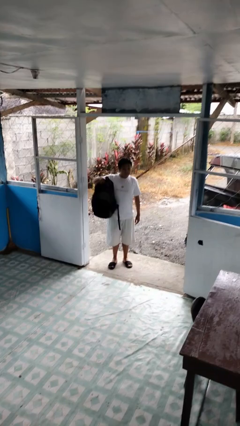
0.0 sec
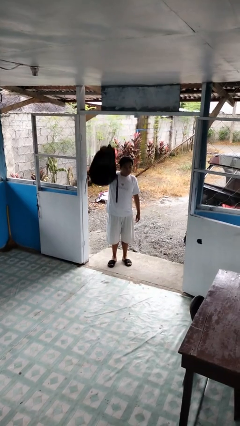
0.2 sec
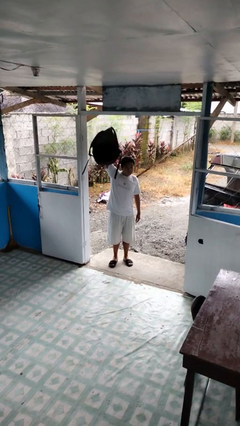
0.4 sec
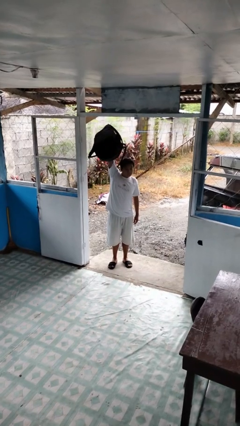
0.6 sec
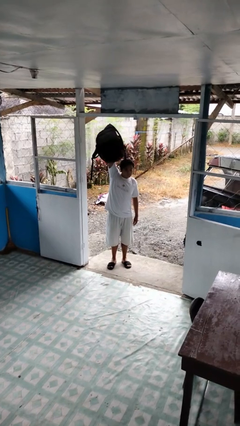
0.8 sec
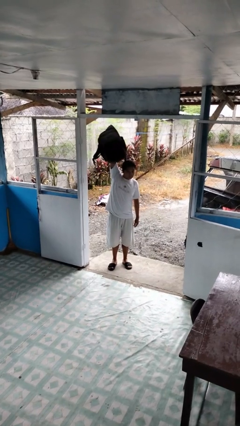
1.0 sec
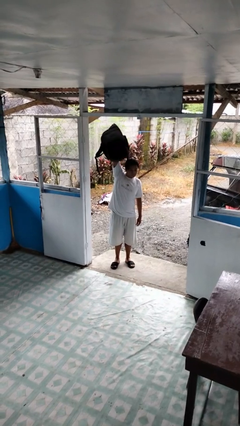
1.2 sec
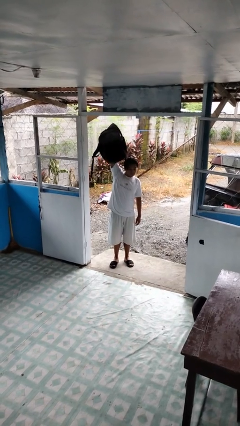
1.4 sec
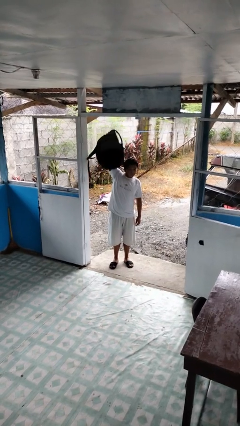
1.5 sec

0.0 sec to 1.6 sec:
person holds object above head

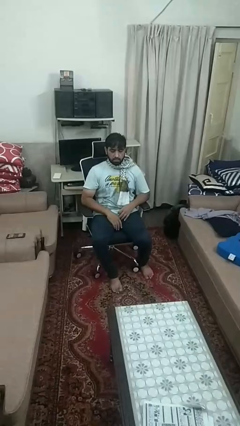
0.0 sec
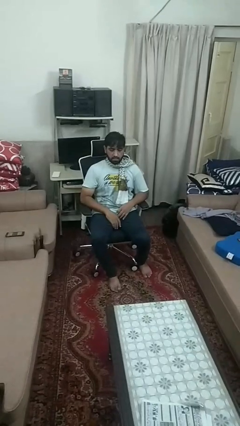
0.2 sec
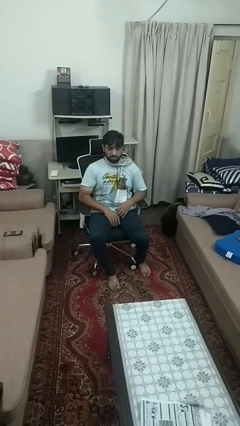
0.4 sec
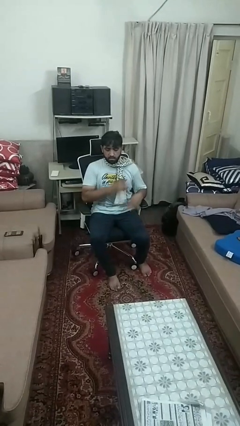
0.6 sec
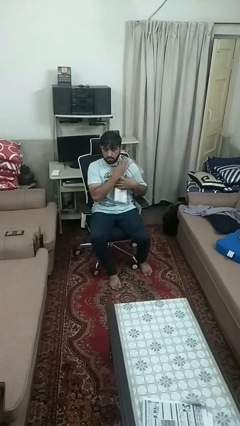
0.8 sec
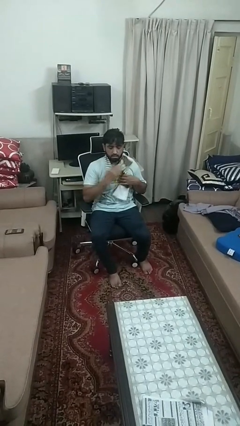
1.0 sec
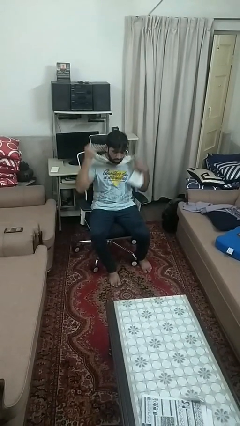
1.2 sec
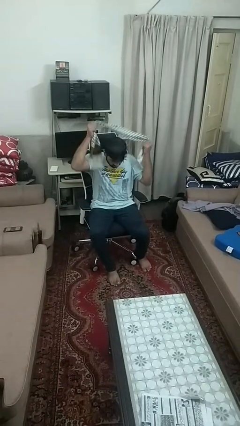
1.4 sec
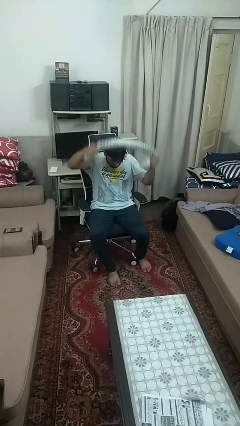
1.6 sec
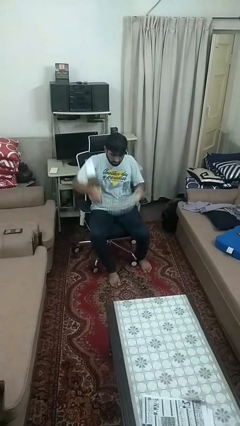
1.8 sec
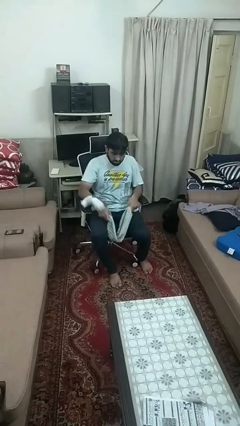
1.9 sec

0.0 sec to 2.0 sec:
person takes off scarf

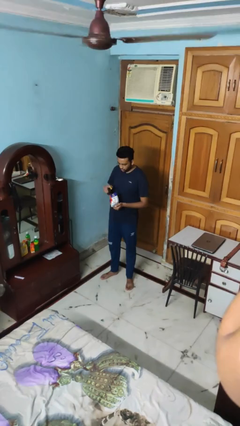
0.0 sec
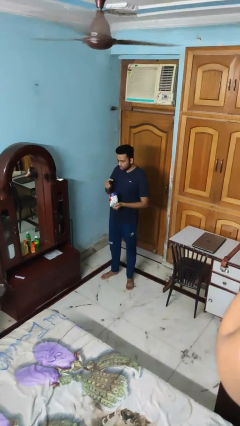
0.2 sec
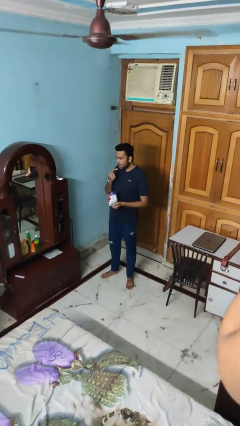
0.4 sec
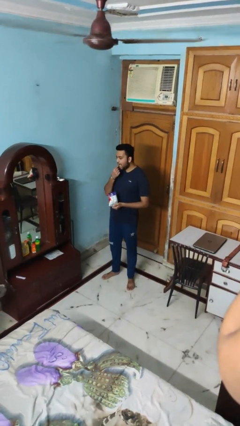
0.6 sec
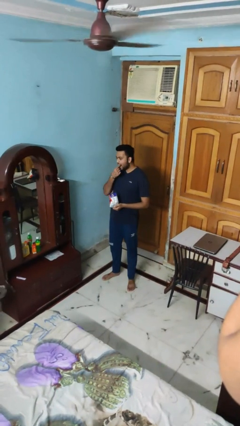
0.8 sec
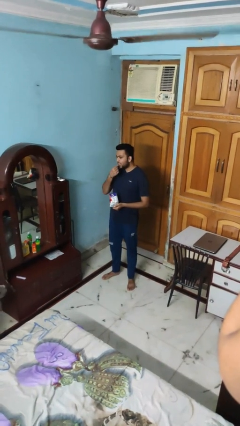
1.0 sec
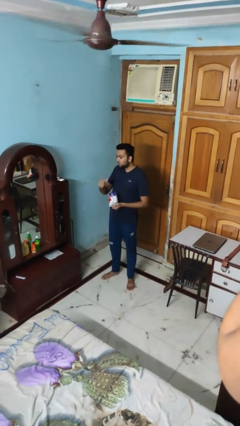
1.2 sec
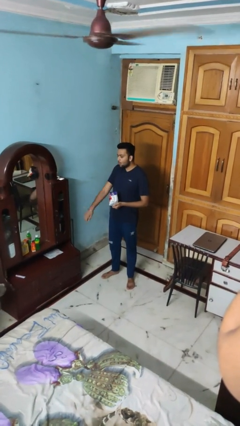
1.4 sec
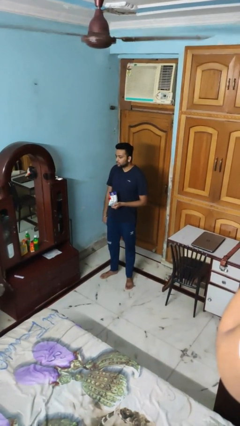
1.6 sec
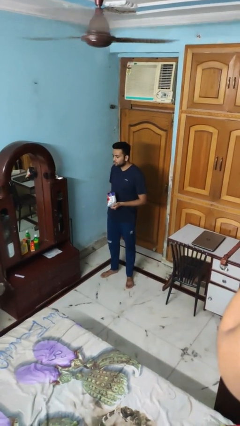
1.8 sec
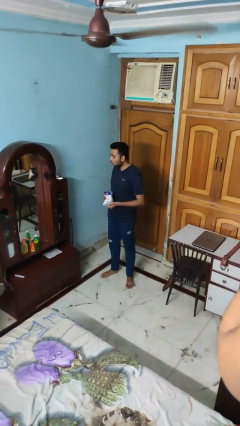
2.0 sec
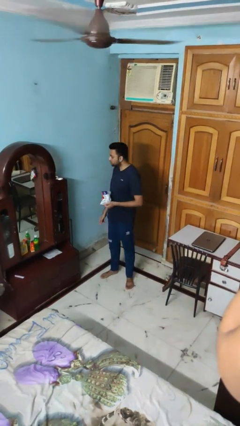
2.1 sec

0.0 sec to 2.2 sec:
person eats snack from bag

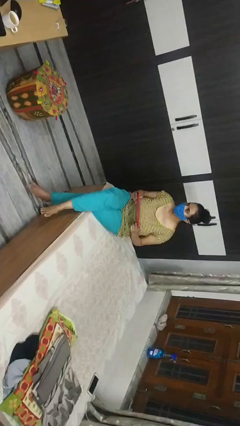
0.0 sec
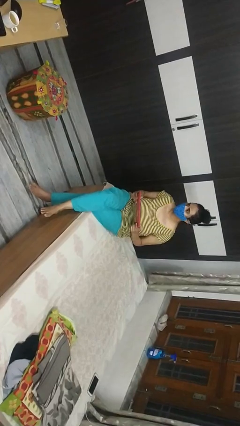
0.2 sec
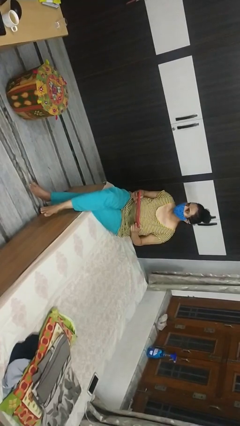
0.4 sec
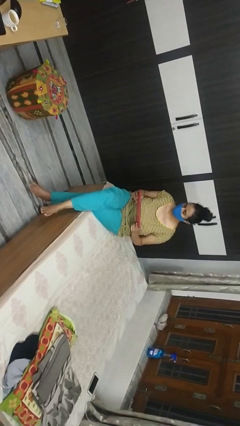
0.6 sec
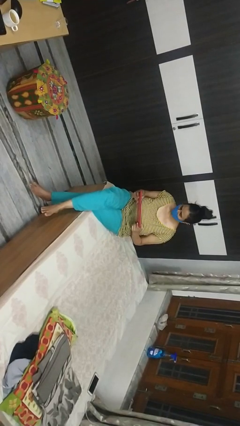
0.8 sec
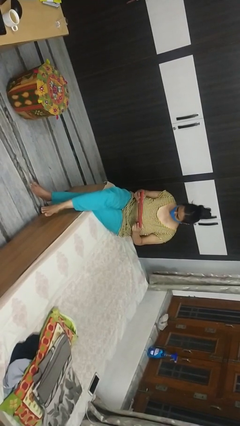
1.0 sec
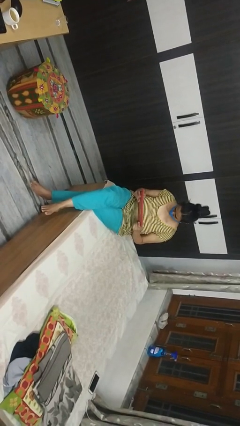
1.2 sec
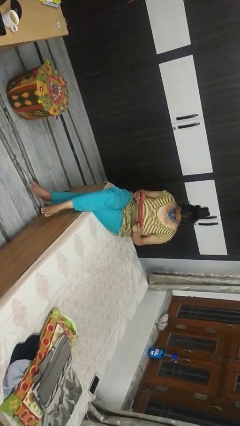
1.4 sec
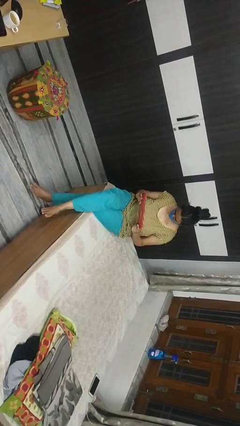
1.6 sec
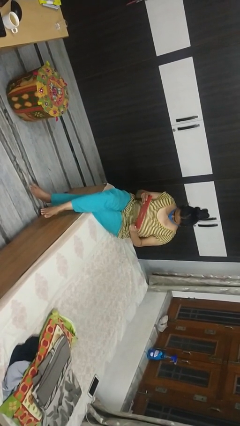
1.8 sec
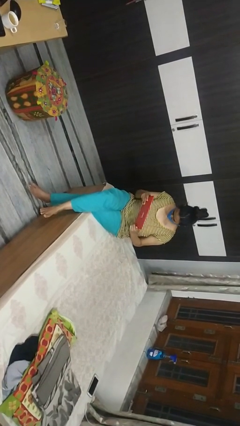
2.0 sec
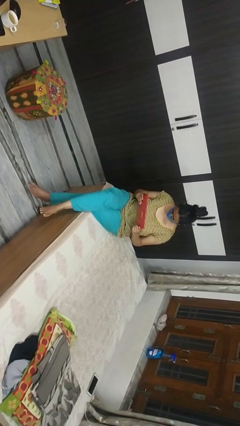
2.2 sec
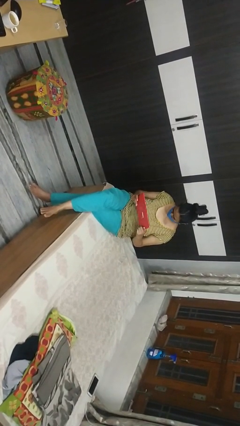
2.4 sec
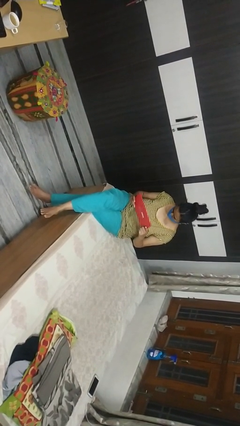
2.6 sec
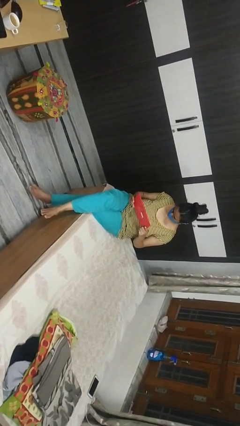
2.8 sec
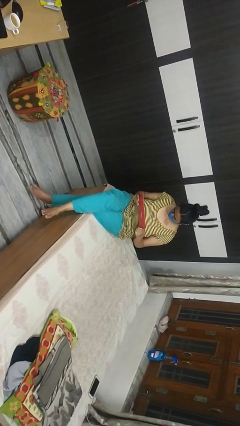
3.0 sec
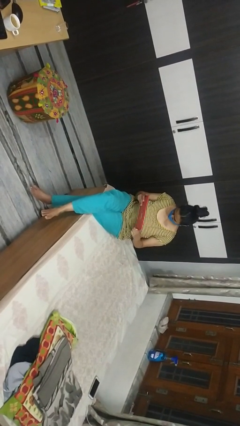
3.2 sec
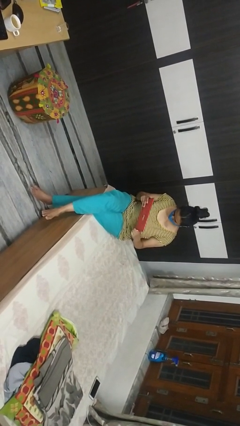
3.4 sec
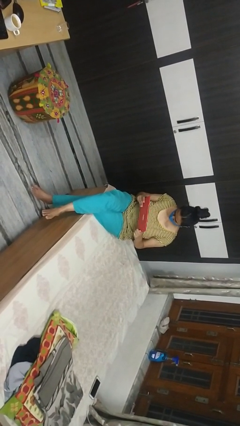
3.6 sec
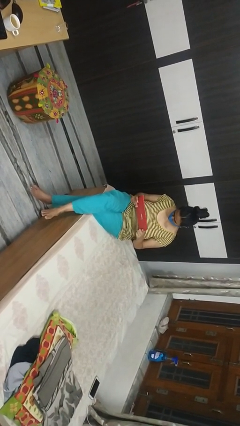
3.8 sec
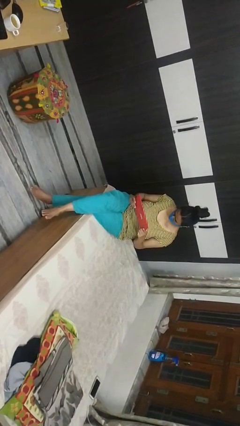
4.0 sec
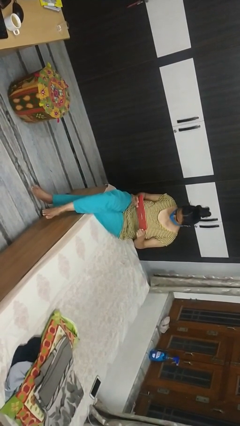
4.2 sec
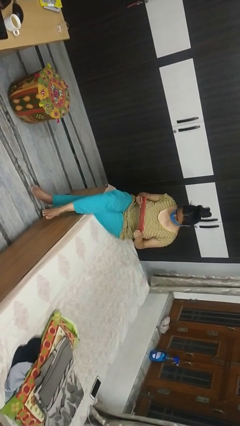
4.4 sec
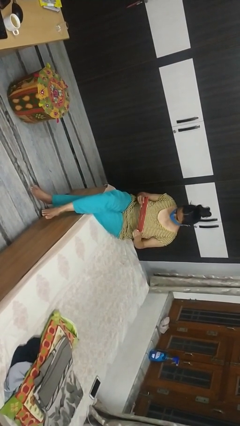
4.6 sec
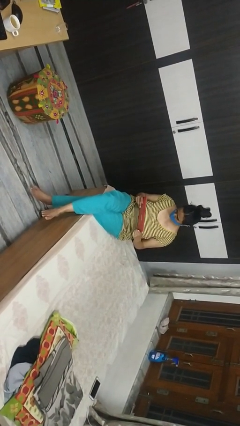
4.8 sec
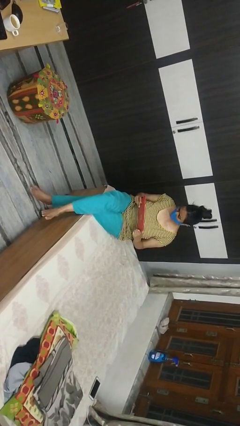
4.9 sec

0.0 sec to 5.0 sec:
person interacts with handheld game

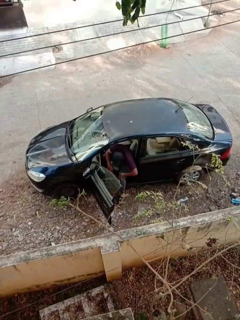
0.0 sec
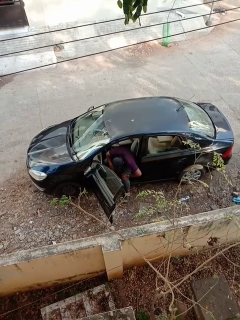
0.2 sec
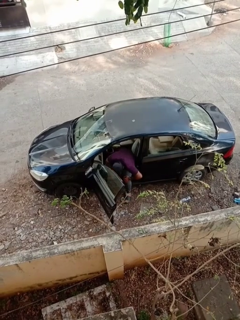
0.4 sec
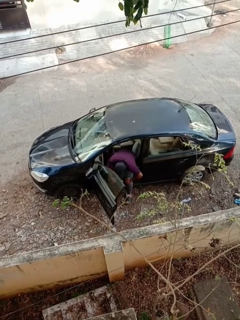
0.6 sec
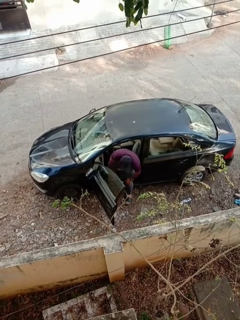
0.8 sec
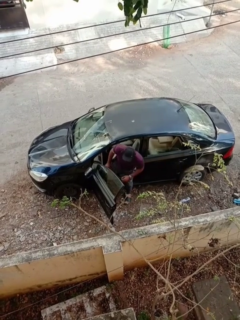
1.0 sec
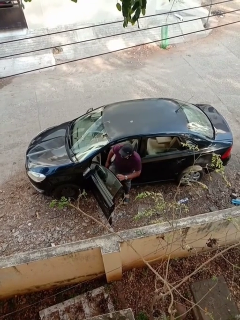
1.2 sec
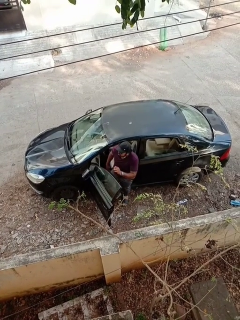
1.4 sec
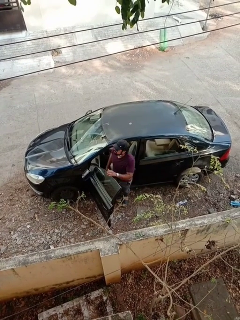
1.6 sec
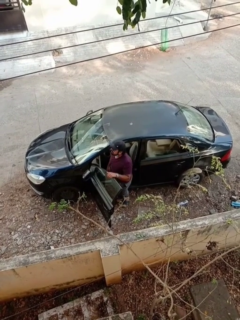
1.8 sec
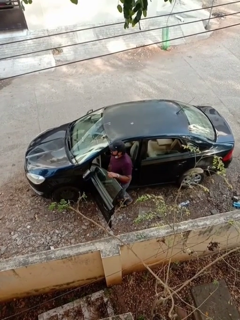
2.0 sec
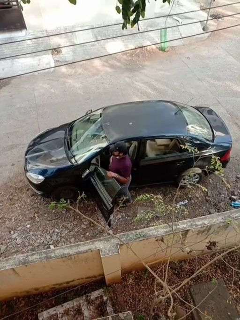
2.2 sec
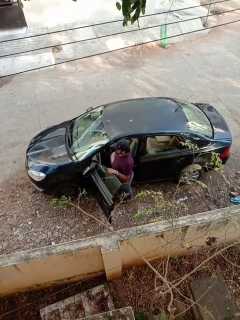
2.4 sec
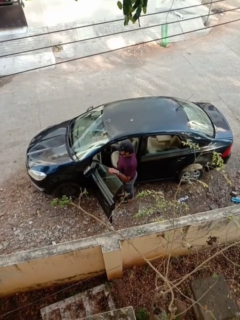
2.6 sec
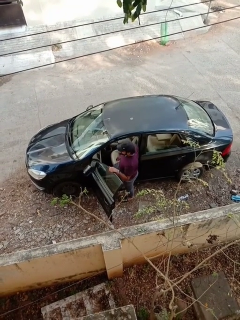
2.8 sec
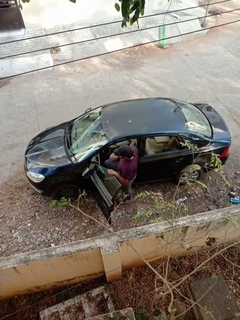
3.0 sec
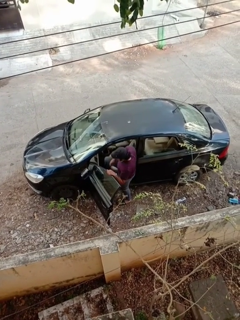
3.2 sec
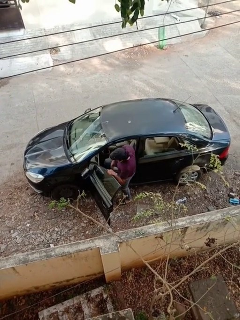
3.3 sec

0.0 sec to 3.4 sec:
person exits car

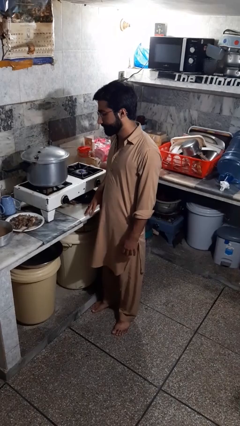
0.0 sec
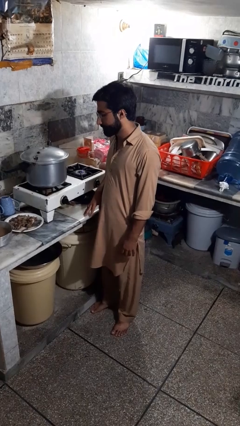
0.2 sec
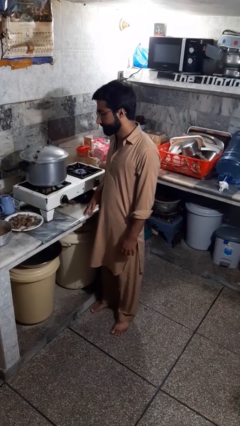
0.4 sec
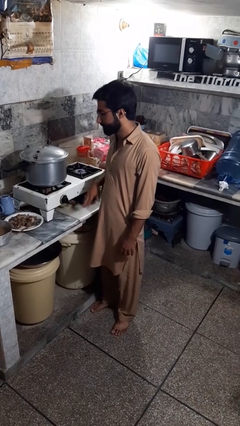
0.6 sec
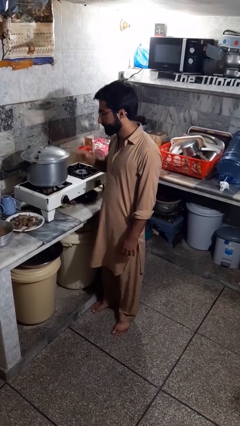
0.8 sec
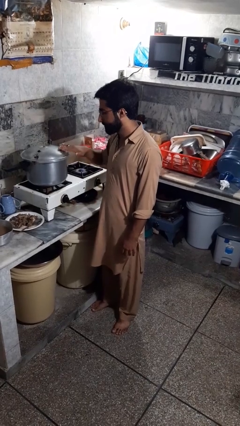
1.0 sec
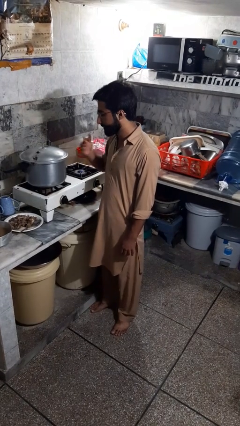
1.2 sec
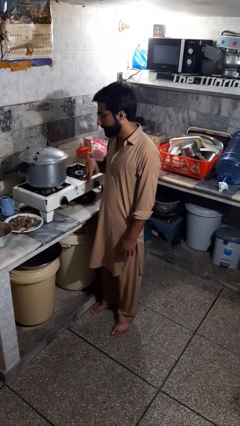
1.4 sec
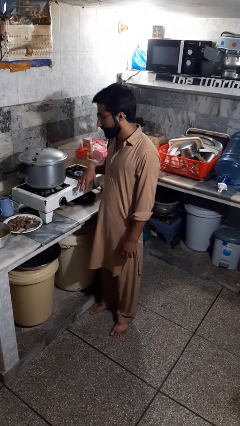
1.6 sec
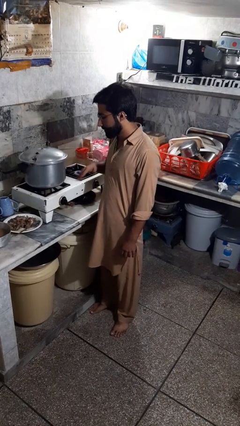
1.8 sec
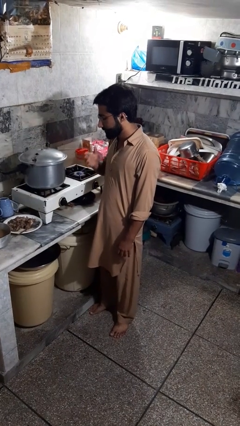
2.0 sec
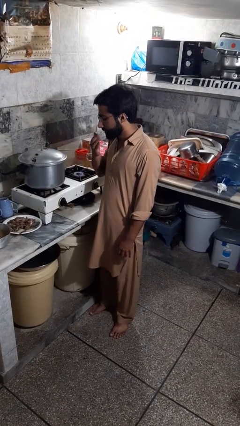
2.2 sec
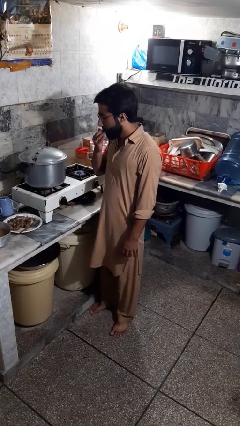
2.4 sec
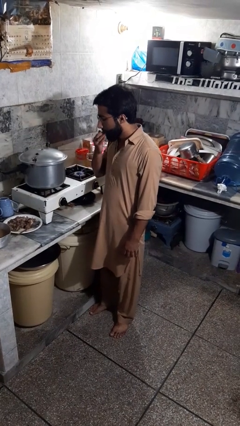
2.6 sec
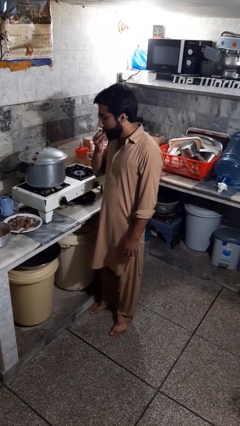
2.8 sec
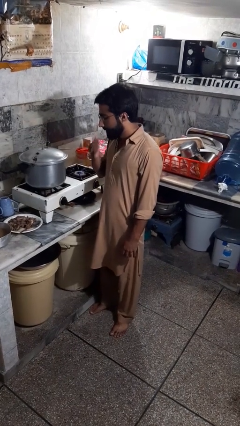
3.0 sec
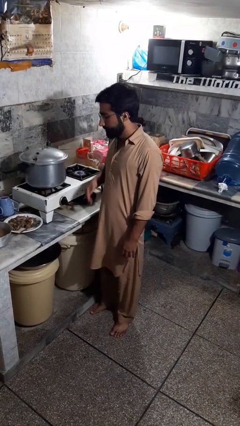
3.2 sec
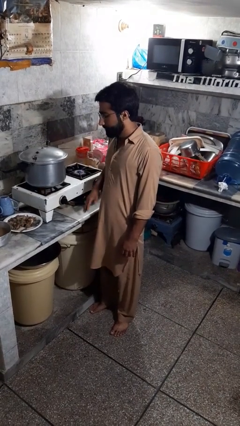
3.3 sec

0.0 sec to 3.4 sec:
person burns hand

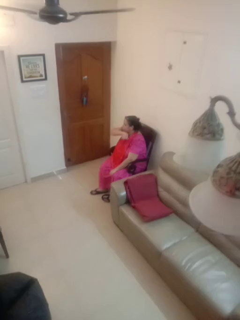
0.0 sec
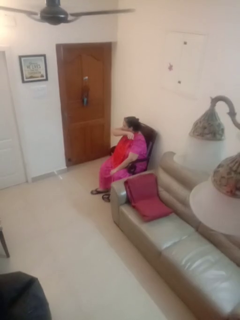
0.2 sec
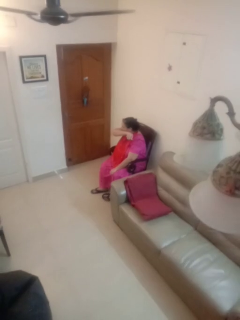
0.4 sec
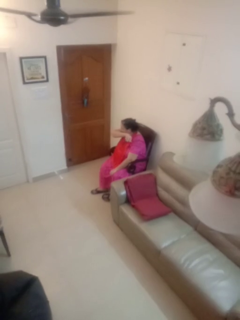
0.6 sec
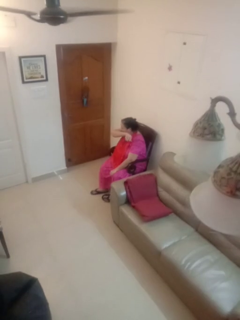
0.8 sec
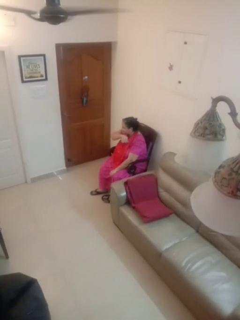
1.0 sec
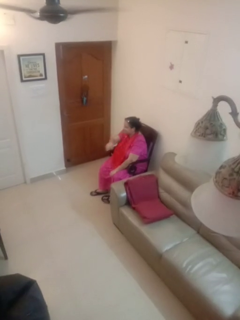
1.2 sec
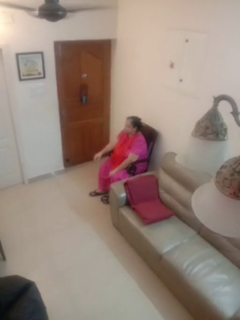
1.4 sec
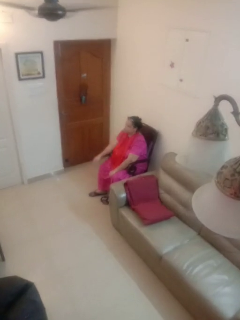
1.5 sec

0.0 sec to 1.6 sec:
person sneezes into arm
